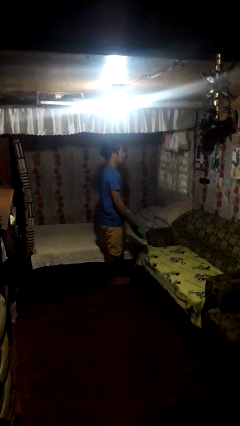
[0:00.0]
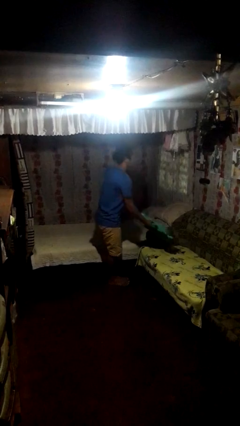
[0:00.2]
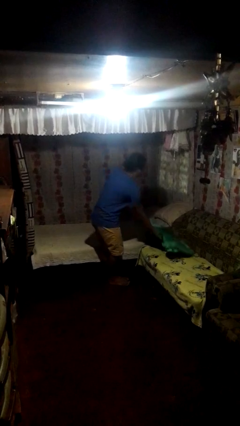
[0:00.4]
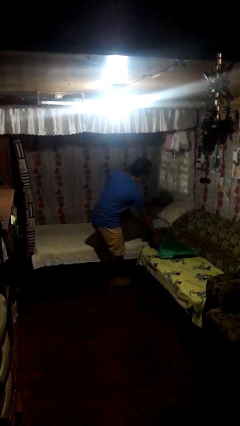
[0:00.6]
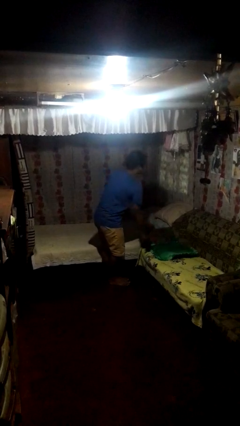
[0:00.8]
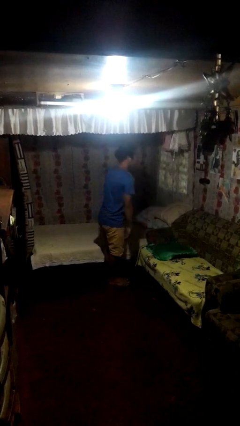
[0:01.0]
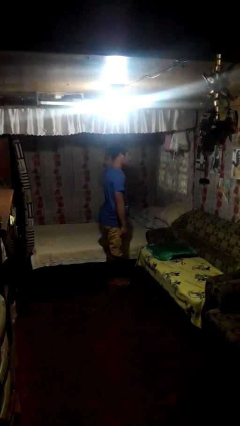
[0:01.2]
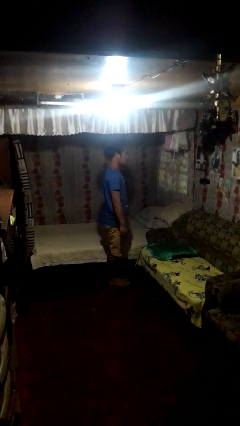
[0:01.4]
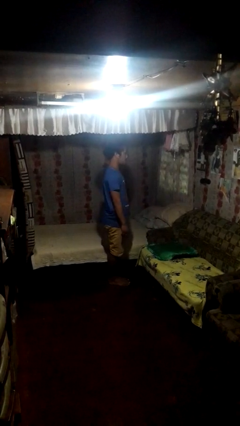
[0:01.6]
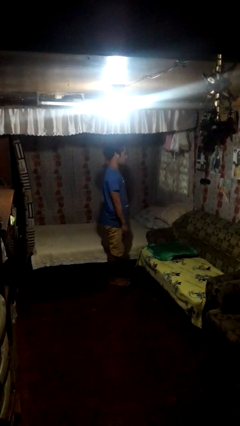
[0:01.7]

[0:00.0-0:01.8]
person puts down object on couch

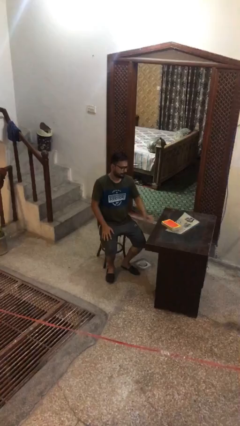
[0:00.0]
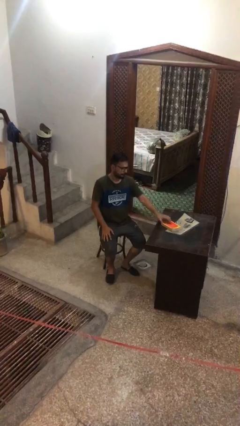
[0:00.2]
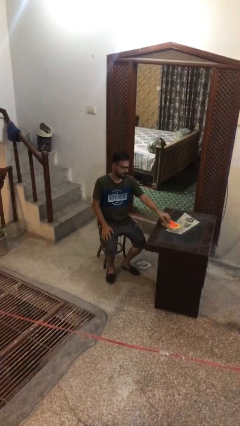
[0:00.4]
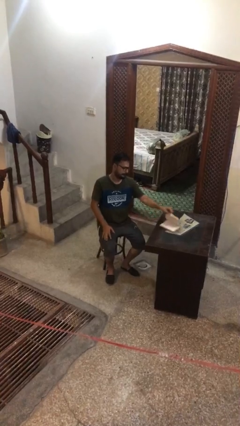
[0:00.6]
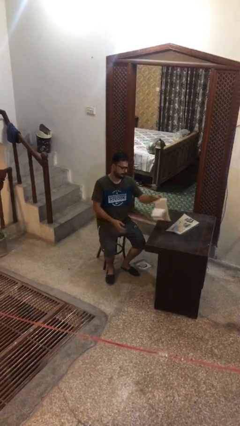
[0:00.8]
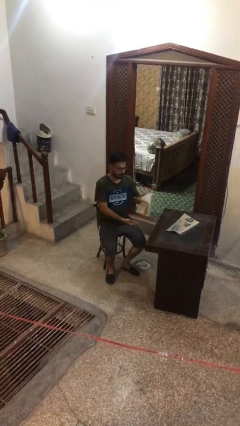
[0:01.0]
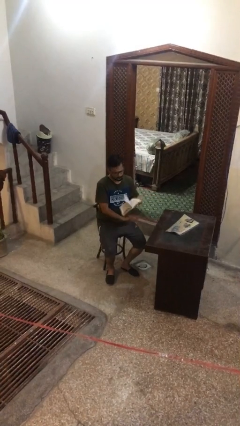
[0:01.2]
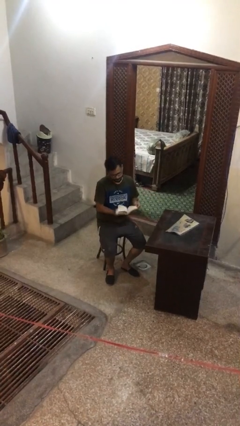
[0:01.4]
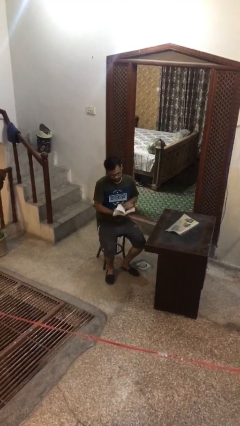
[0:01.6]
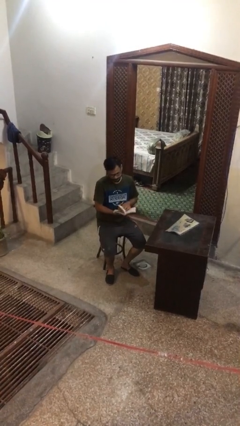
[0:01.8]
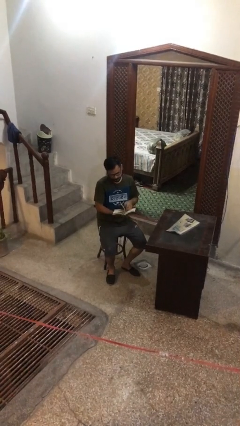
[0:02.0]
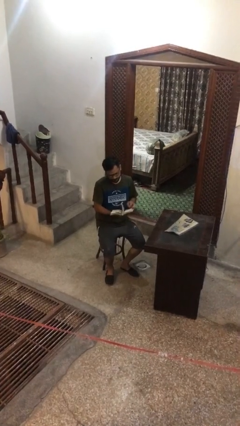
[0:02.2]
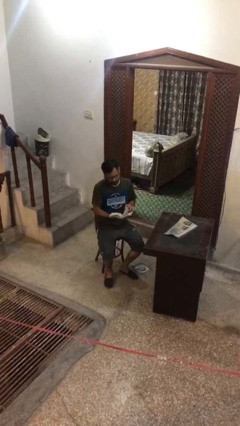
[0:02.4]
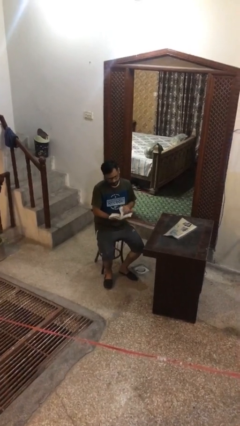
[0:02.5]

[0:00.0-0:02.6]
person reads document

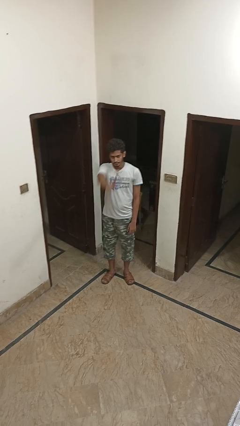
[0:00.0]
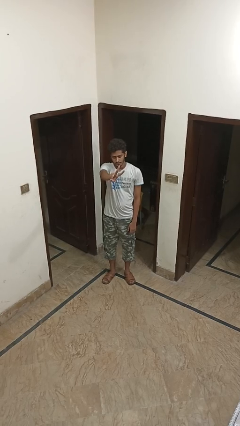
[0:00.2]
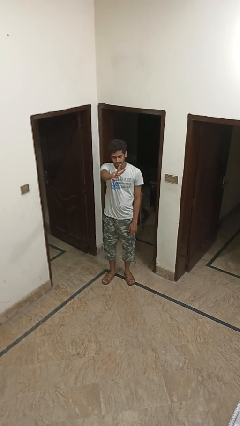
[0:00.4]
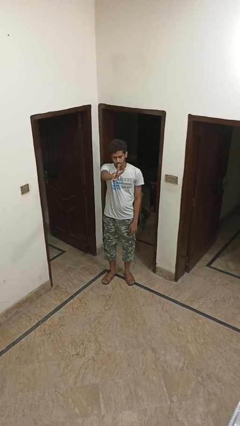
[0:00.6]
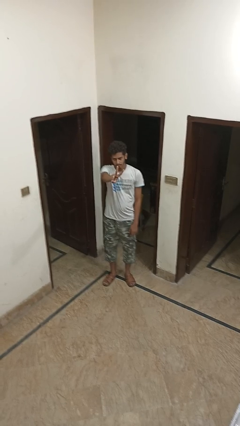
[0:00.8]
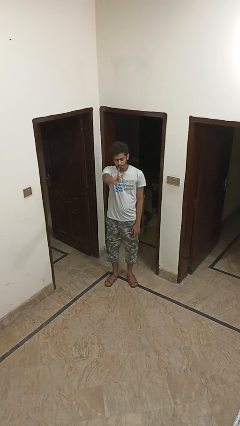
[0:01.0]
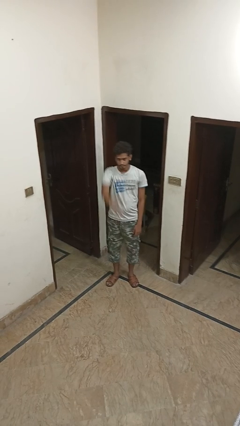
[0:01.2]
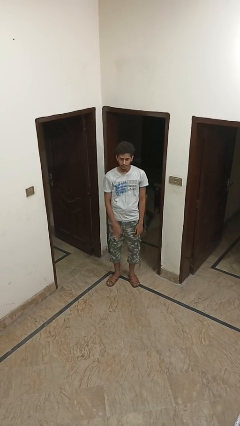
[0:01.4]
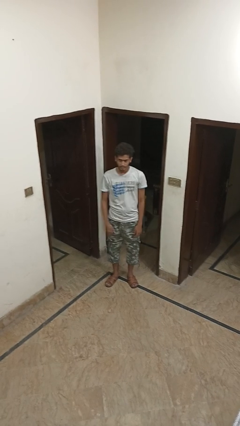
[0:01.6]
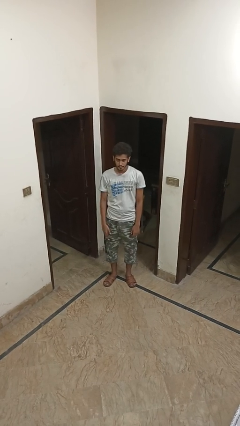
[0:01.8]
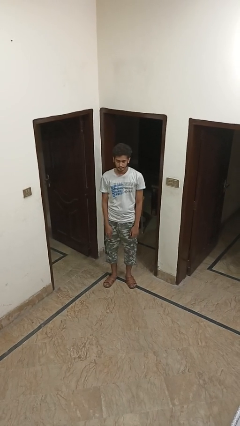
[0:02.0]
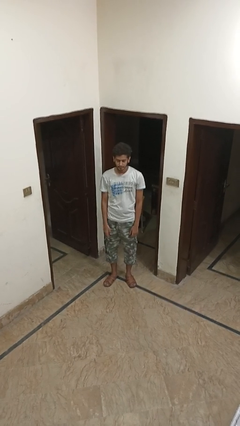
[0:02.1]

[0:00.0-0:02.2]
person gestures peace

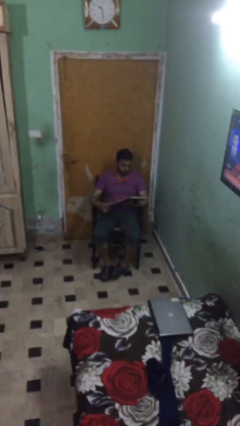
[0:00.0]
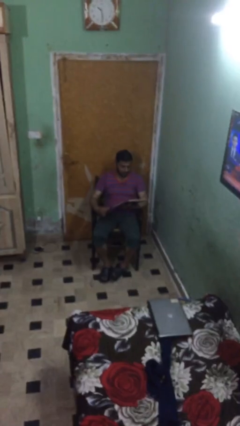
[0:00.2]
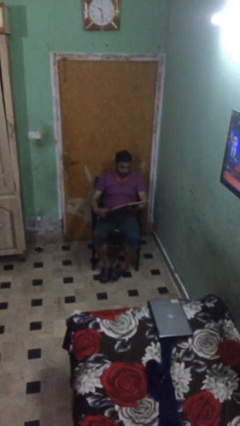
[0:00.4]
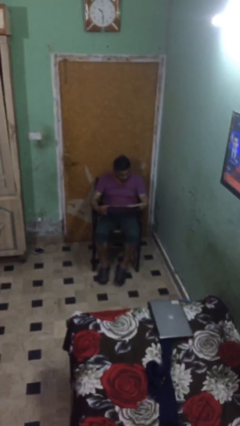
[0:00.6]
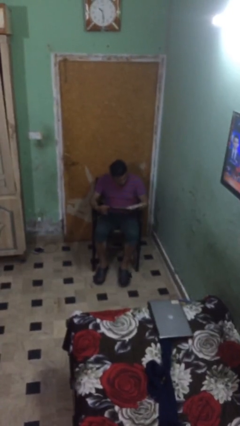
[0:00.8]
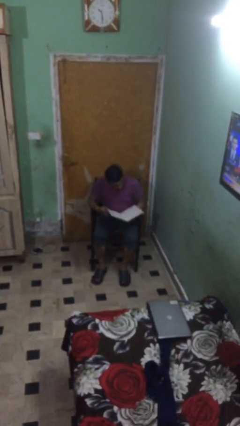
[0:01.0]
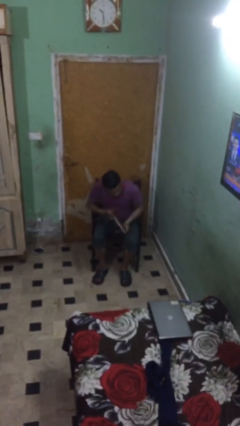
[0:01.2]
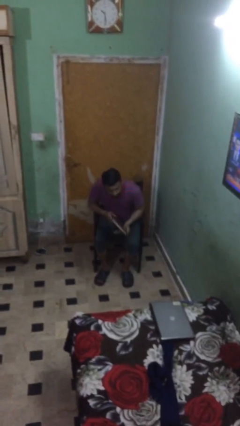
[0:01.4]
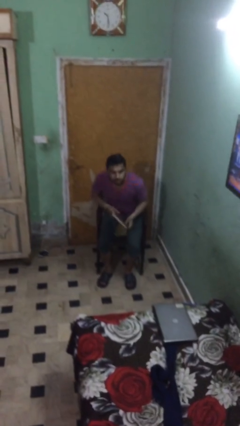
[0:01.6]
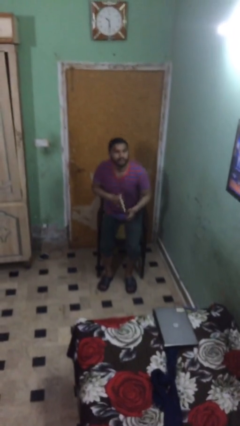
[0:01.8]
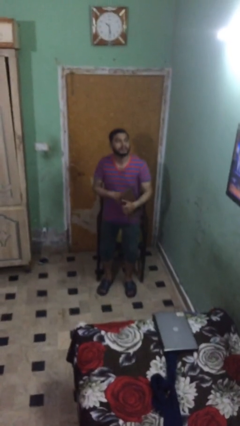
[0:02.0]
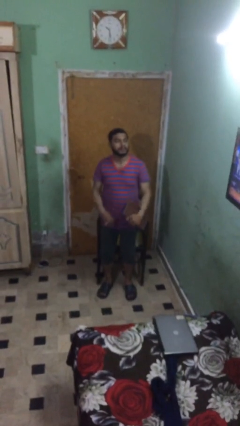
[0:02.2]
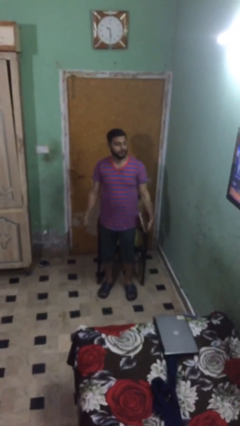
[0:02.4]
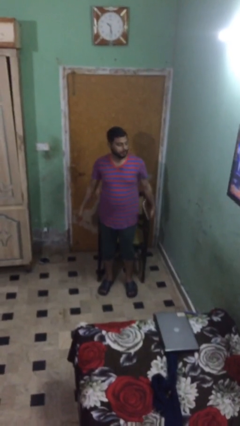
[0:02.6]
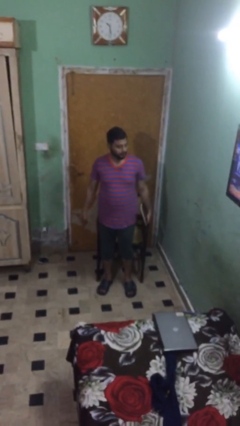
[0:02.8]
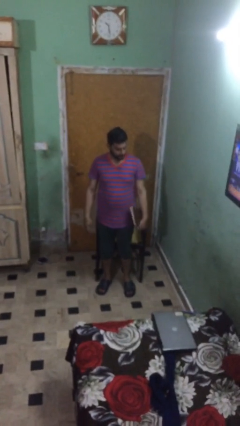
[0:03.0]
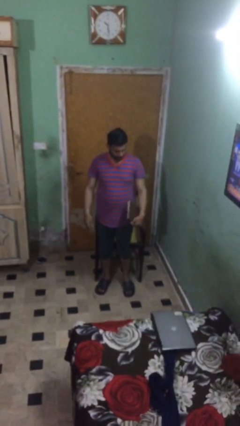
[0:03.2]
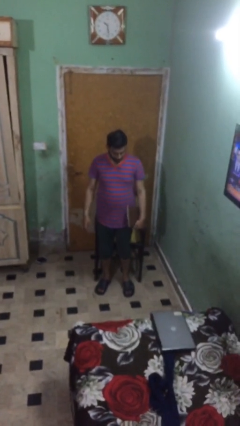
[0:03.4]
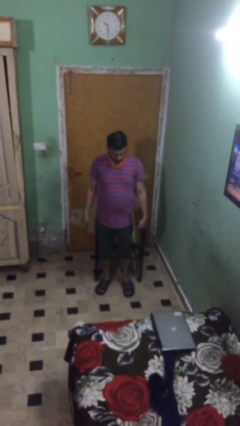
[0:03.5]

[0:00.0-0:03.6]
person stands up

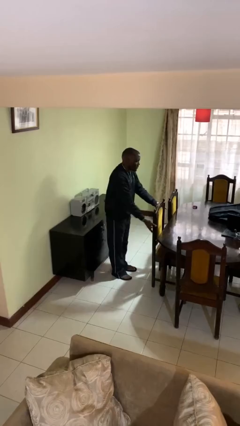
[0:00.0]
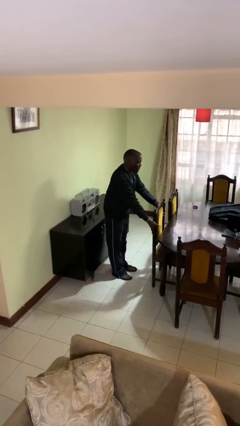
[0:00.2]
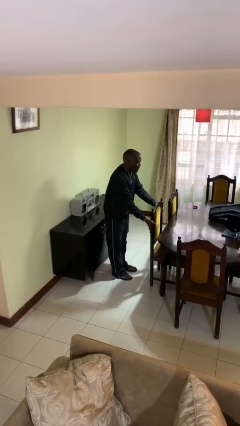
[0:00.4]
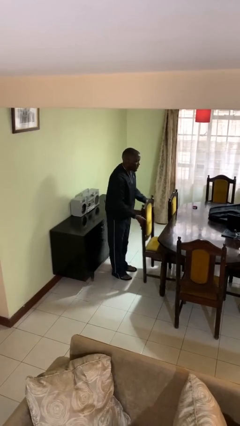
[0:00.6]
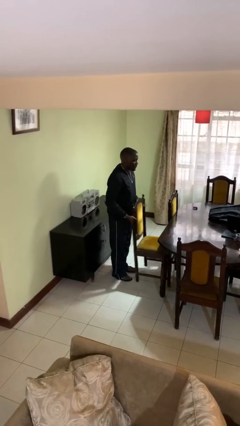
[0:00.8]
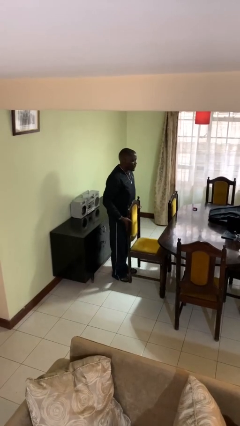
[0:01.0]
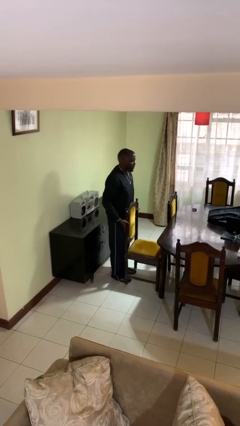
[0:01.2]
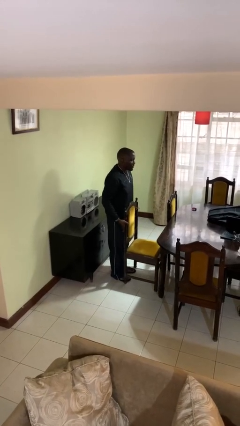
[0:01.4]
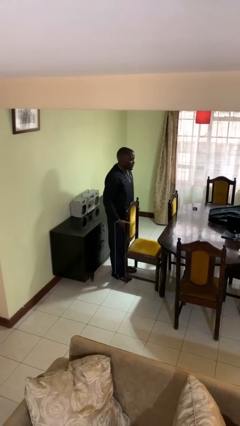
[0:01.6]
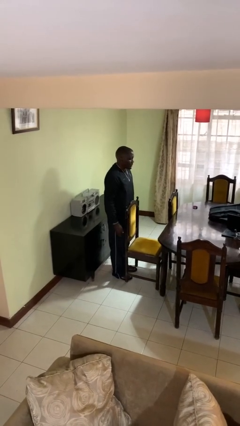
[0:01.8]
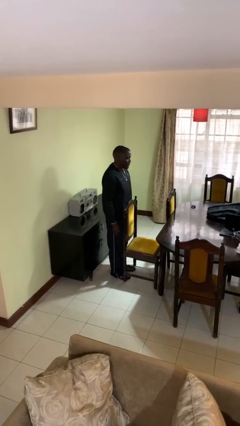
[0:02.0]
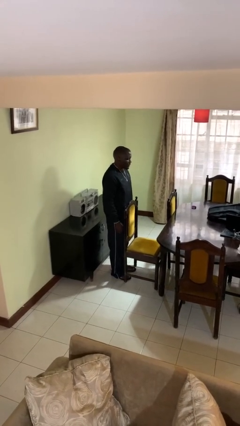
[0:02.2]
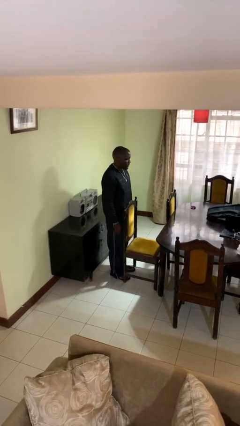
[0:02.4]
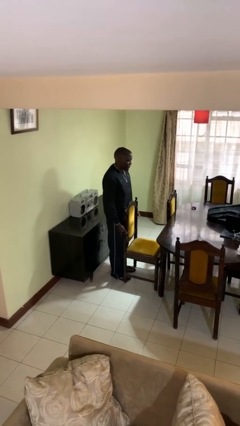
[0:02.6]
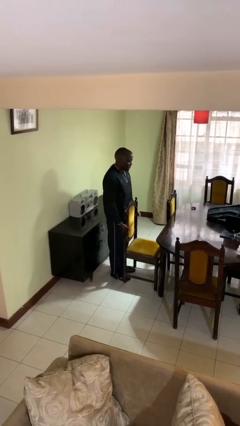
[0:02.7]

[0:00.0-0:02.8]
person pulls out chair

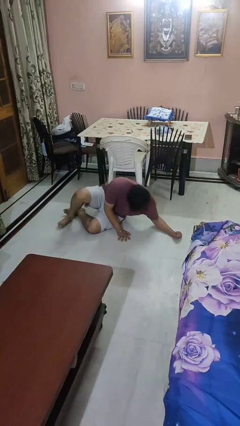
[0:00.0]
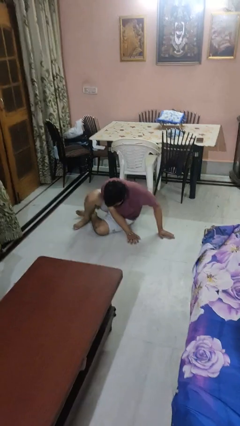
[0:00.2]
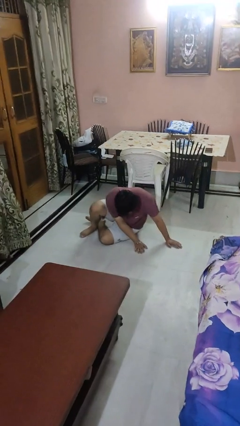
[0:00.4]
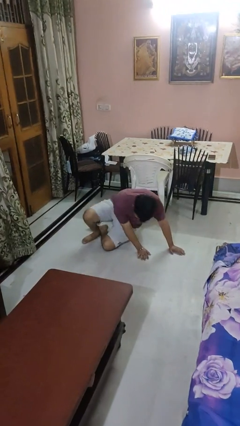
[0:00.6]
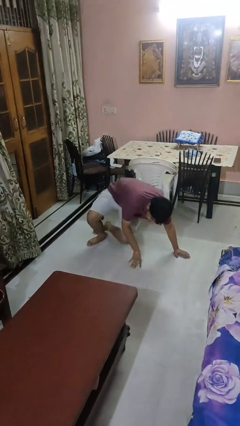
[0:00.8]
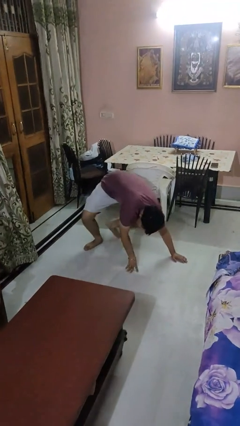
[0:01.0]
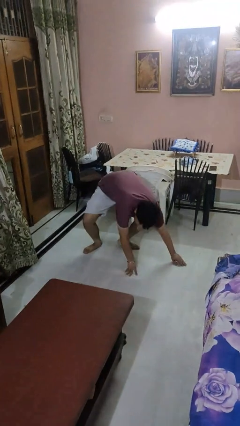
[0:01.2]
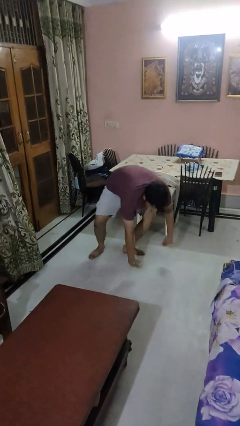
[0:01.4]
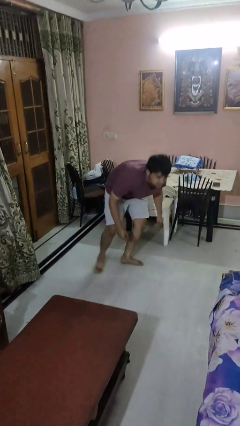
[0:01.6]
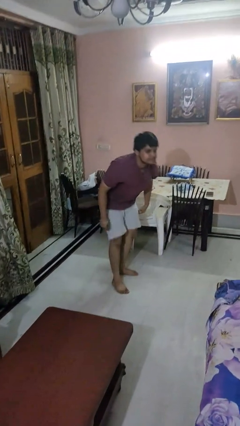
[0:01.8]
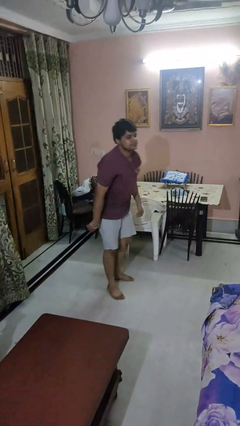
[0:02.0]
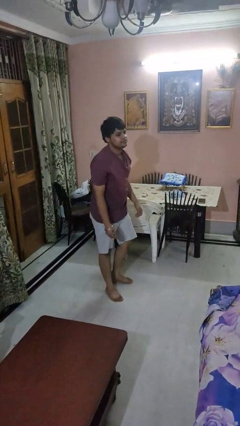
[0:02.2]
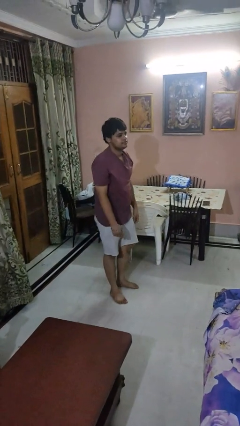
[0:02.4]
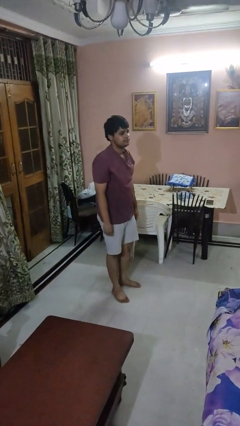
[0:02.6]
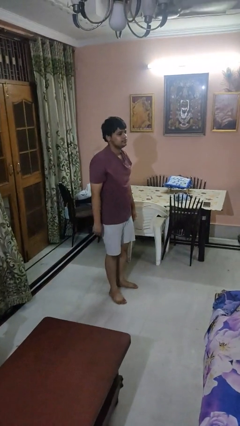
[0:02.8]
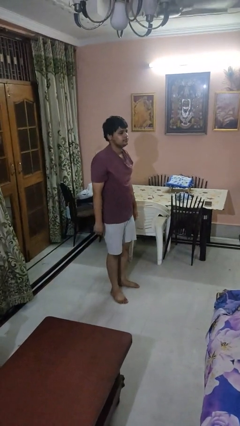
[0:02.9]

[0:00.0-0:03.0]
person stands up from floor

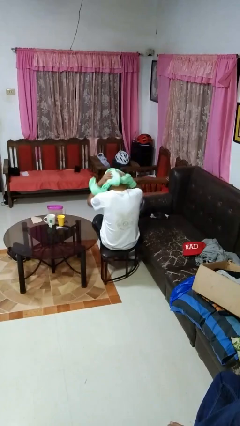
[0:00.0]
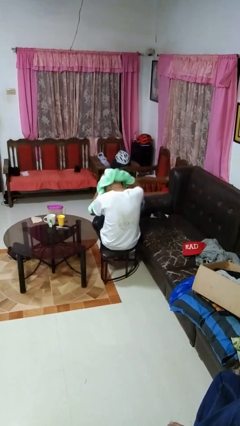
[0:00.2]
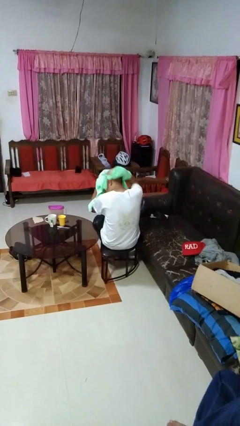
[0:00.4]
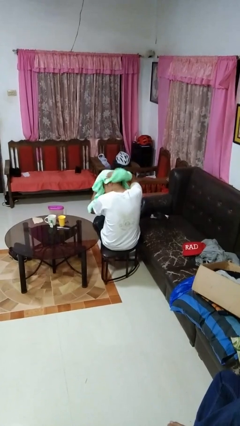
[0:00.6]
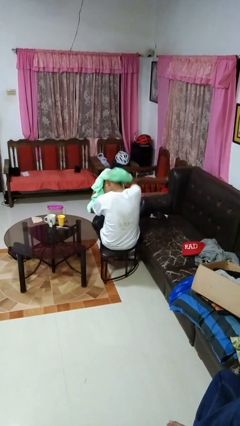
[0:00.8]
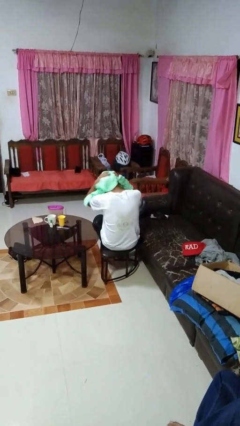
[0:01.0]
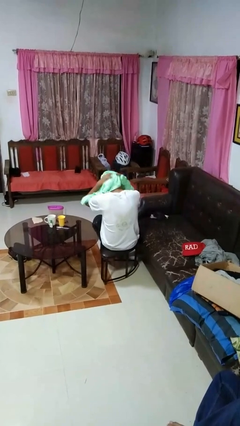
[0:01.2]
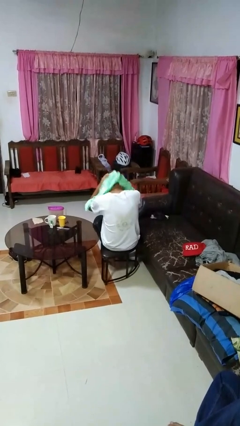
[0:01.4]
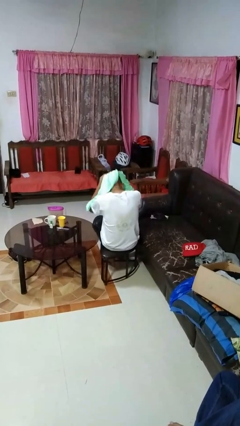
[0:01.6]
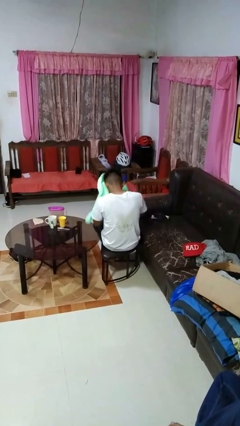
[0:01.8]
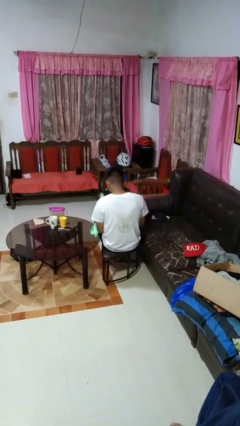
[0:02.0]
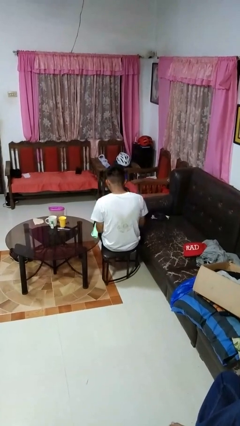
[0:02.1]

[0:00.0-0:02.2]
person dries hair with towel
